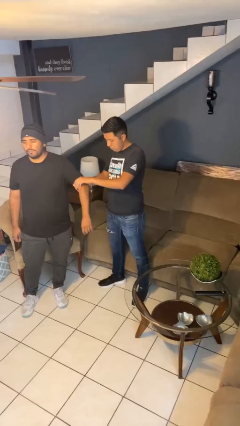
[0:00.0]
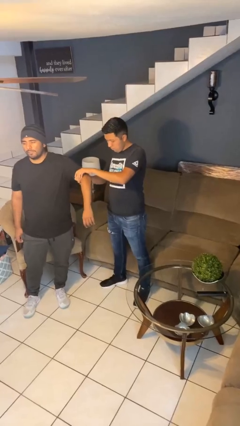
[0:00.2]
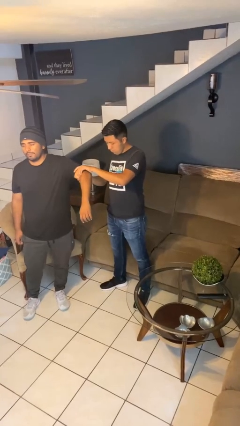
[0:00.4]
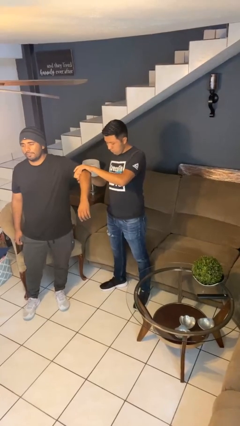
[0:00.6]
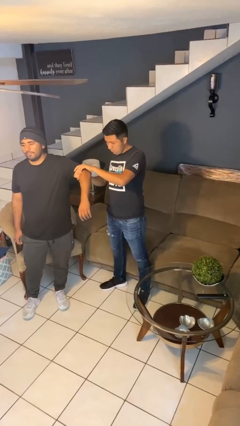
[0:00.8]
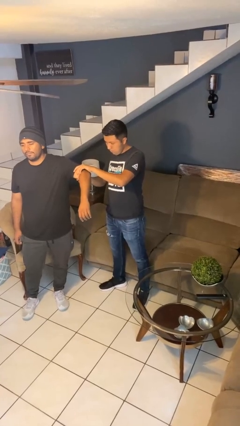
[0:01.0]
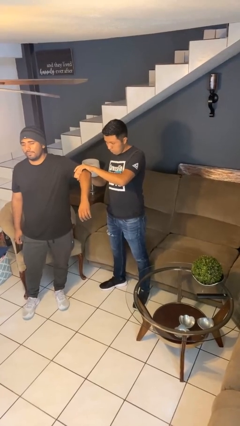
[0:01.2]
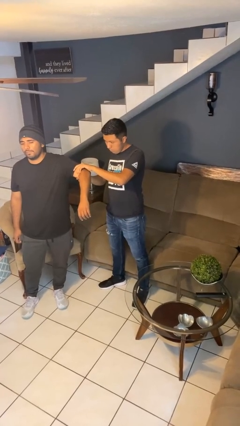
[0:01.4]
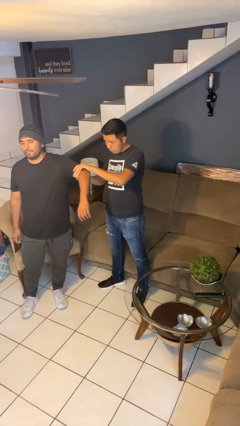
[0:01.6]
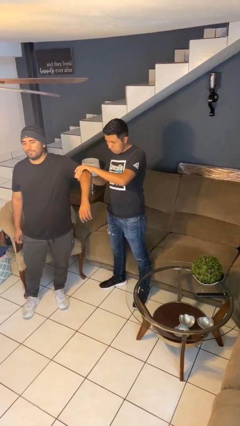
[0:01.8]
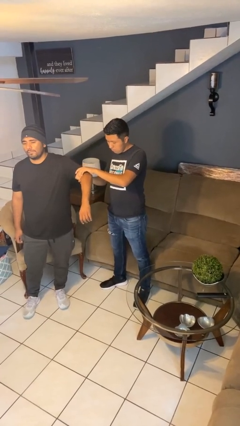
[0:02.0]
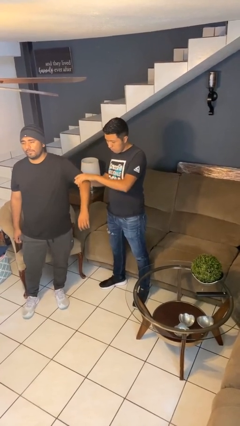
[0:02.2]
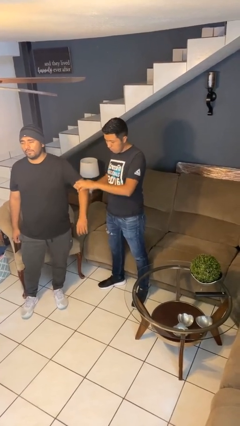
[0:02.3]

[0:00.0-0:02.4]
person grabs person by bicep

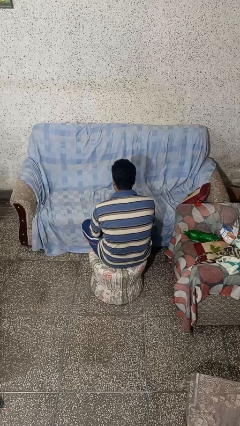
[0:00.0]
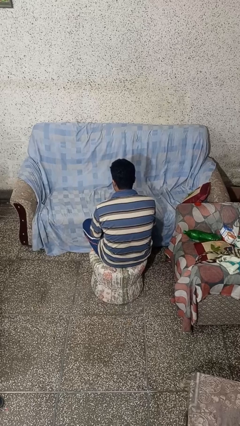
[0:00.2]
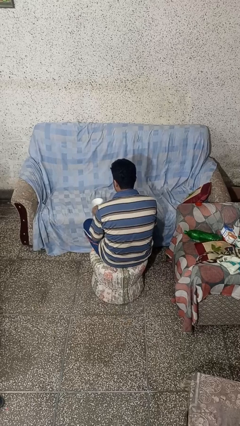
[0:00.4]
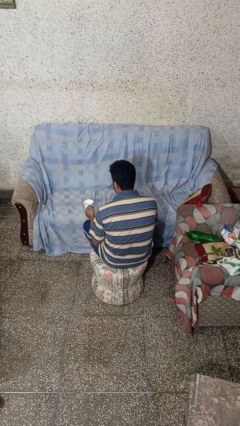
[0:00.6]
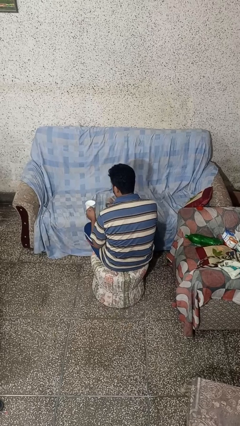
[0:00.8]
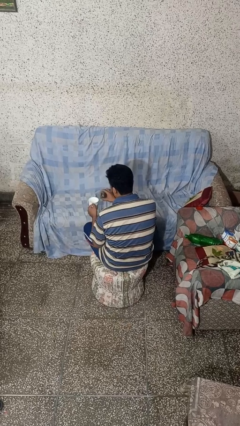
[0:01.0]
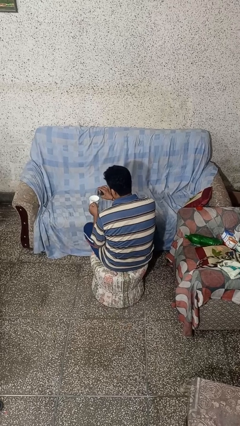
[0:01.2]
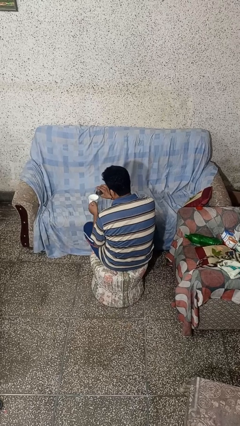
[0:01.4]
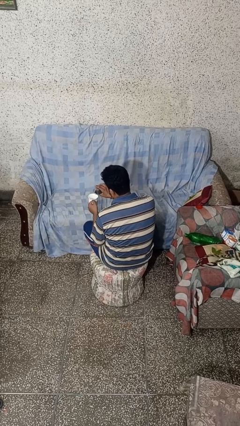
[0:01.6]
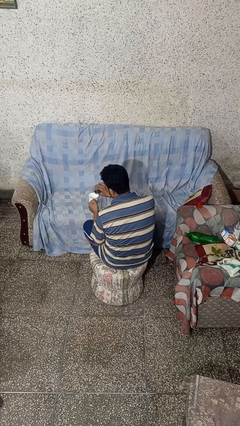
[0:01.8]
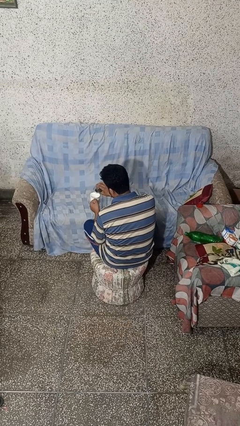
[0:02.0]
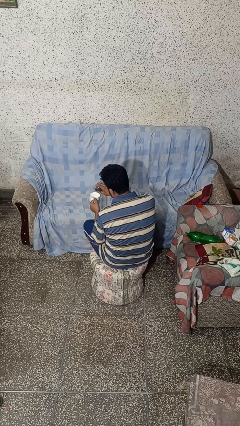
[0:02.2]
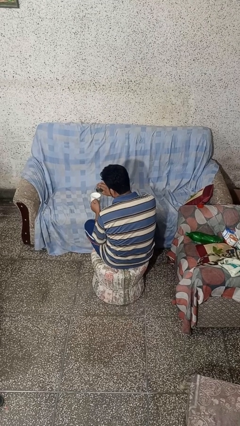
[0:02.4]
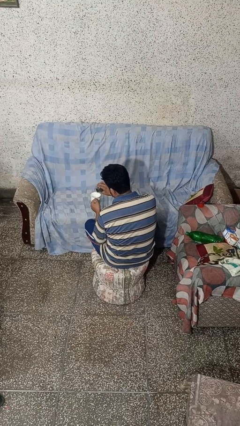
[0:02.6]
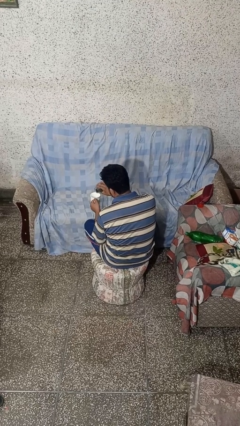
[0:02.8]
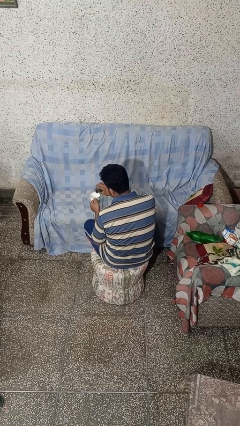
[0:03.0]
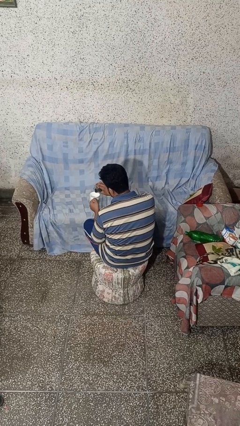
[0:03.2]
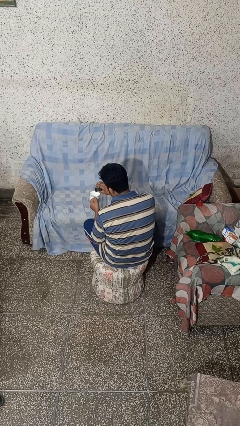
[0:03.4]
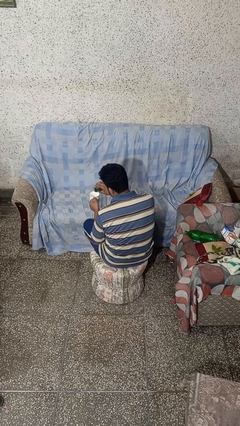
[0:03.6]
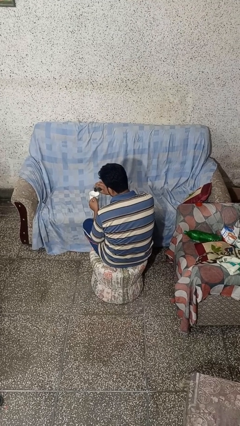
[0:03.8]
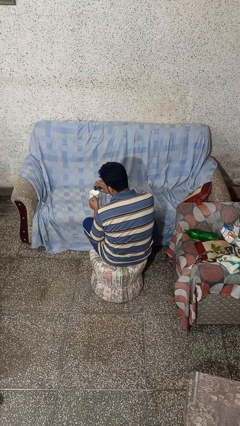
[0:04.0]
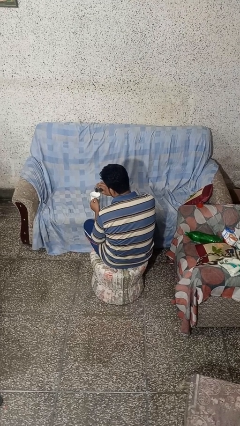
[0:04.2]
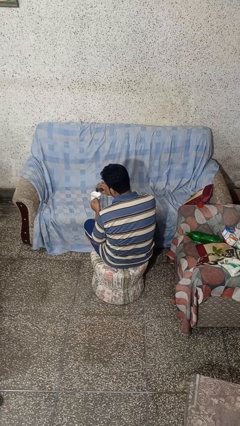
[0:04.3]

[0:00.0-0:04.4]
person pours coffee into mug

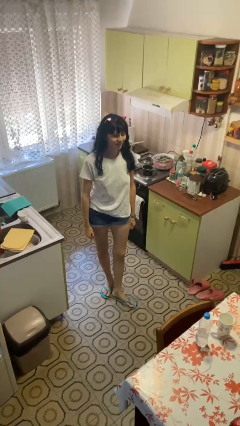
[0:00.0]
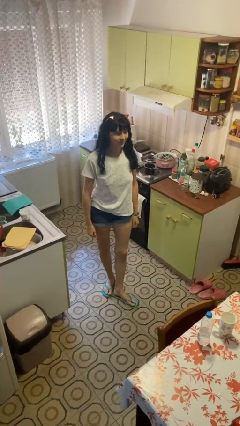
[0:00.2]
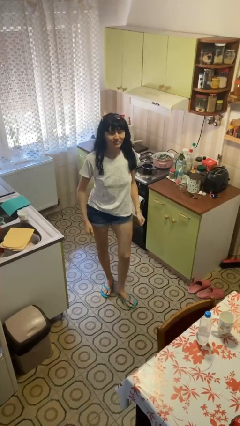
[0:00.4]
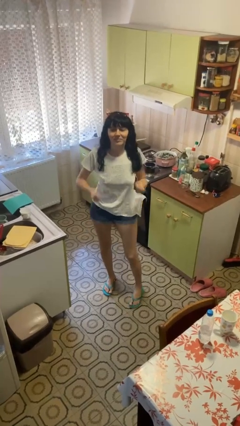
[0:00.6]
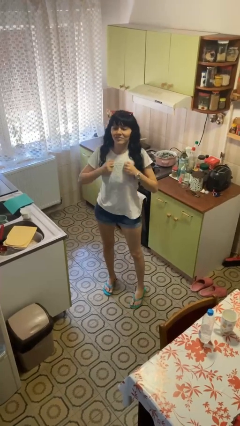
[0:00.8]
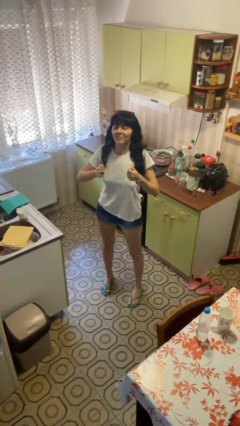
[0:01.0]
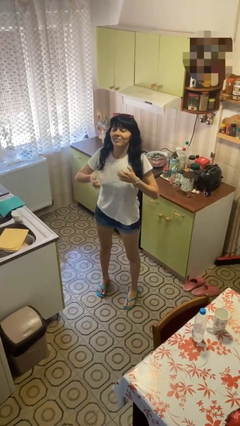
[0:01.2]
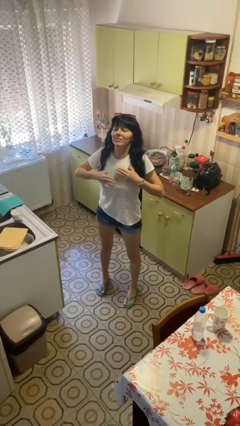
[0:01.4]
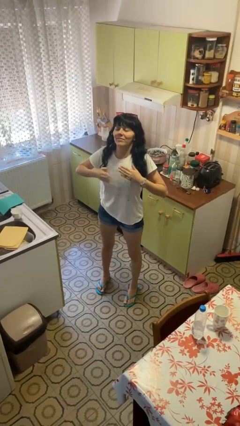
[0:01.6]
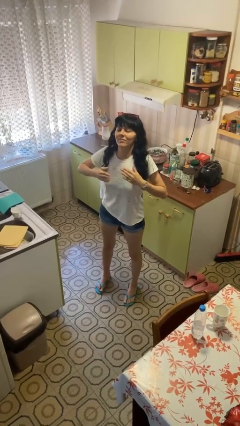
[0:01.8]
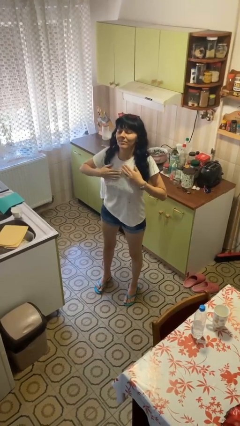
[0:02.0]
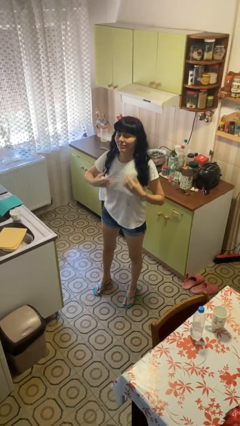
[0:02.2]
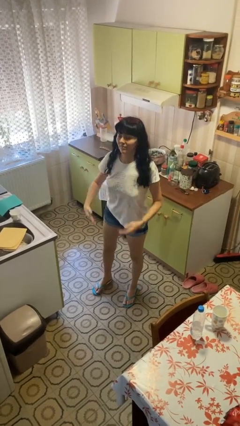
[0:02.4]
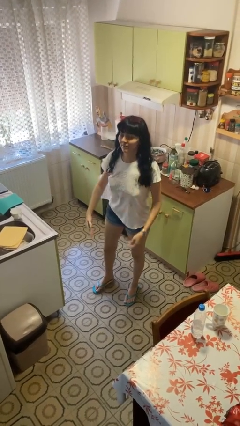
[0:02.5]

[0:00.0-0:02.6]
person drums on chest

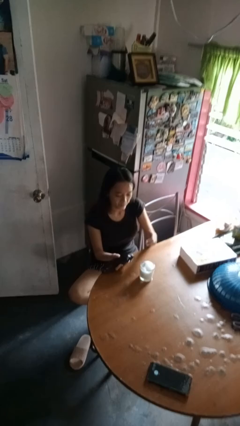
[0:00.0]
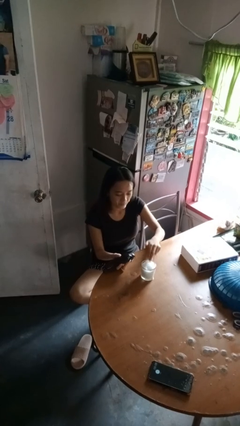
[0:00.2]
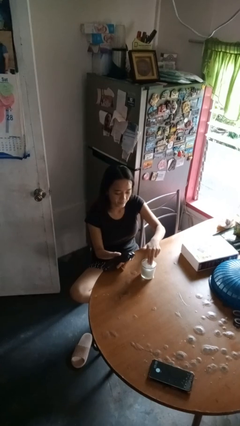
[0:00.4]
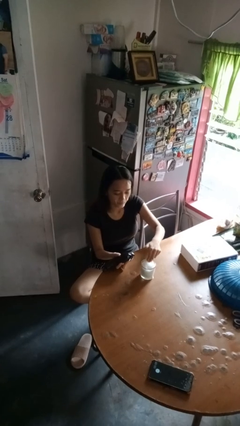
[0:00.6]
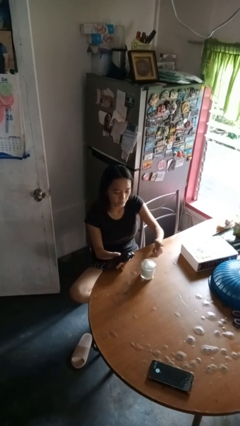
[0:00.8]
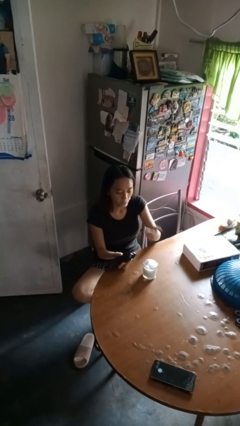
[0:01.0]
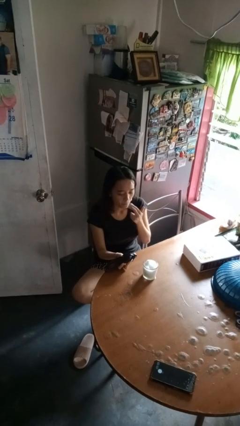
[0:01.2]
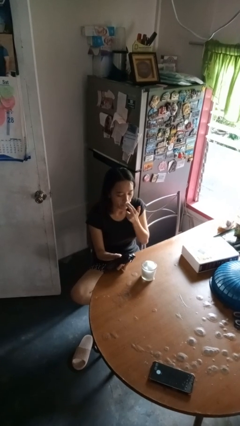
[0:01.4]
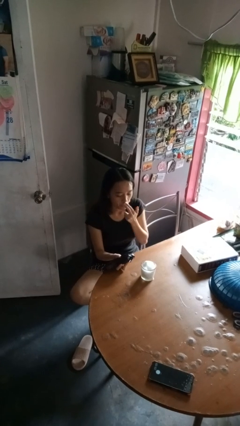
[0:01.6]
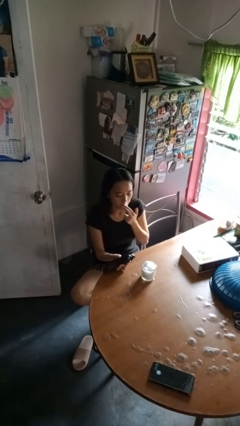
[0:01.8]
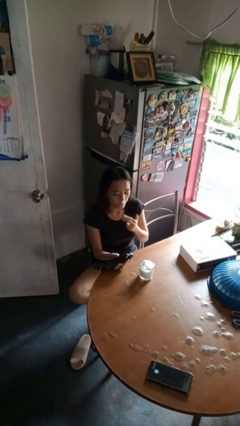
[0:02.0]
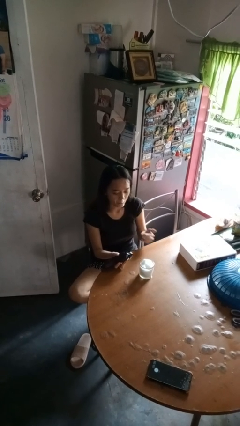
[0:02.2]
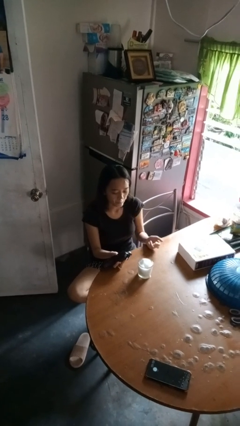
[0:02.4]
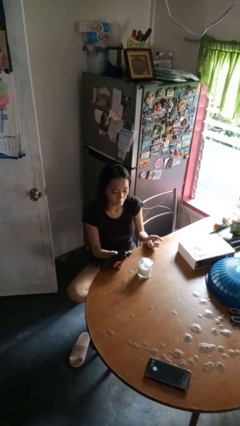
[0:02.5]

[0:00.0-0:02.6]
person applies shaving cream

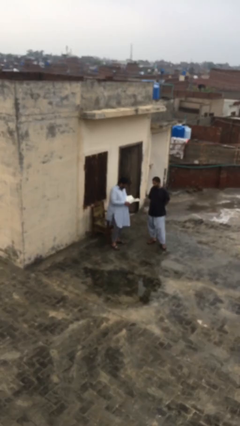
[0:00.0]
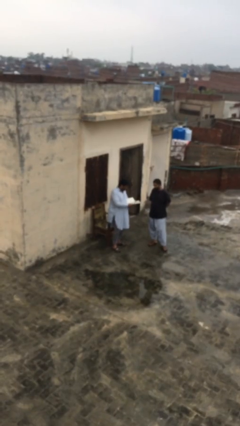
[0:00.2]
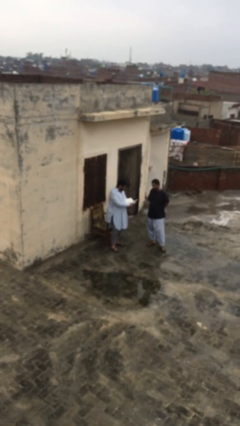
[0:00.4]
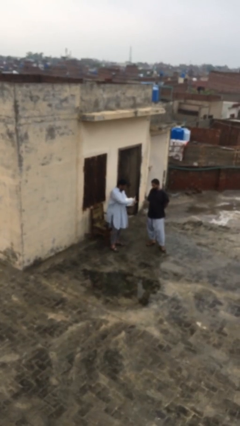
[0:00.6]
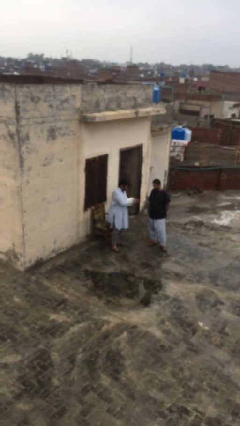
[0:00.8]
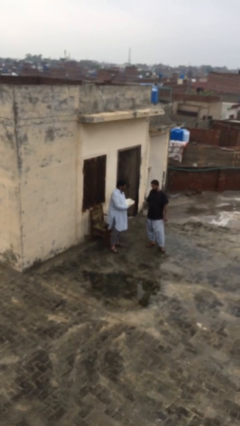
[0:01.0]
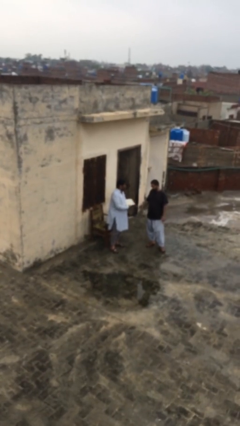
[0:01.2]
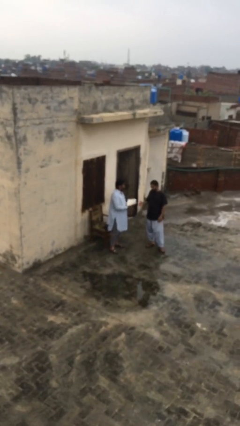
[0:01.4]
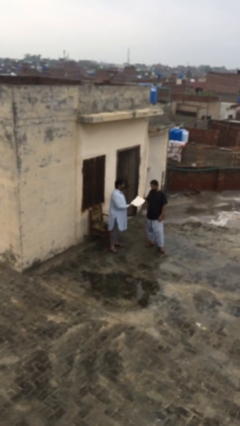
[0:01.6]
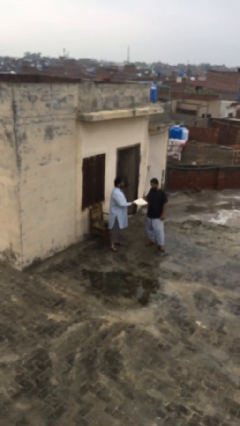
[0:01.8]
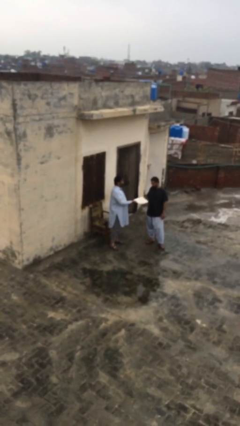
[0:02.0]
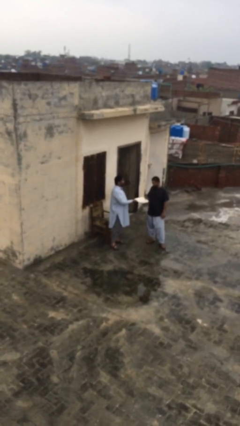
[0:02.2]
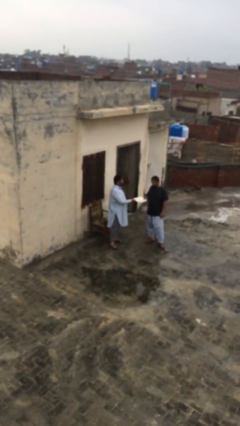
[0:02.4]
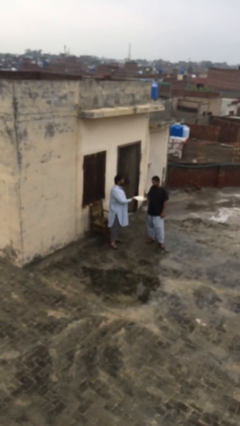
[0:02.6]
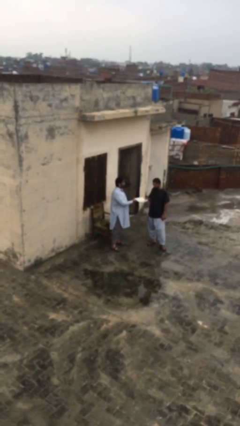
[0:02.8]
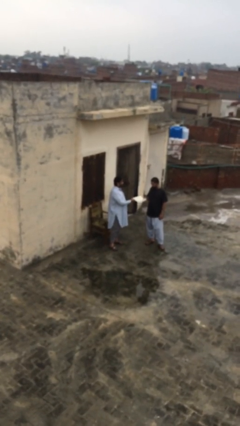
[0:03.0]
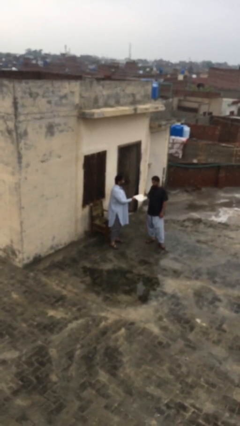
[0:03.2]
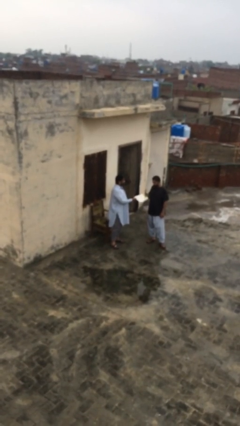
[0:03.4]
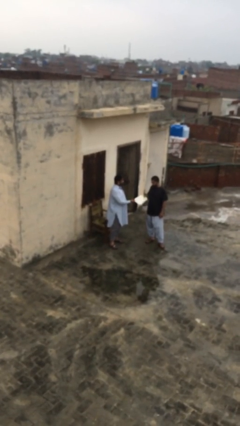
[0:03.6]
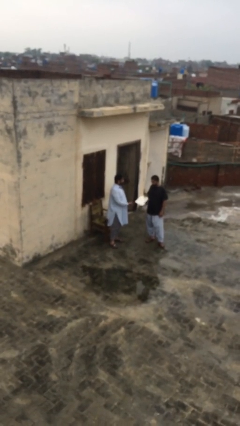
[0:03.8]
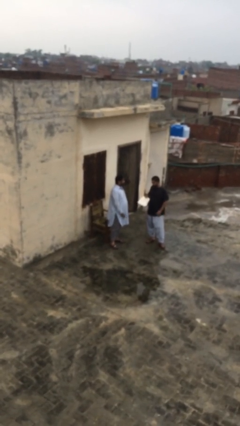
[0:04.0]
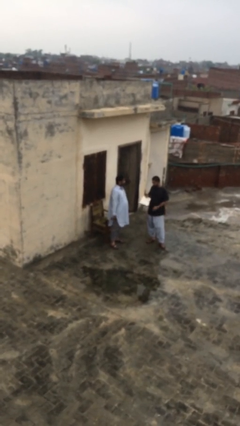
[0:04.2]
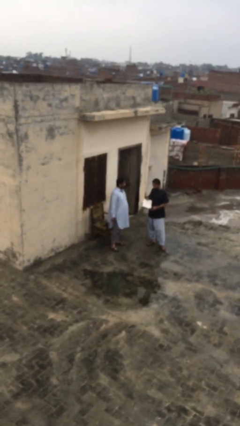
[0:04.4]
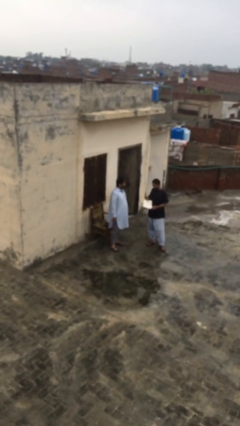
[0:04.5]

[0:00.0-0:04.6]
person transfers object to person

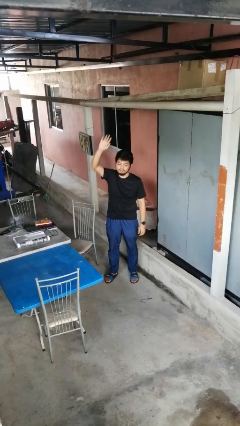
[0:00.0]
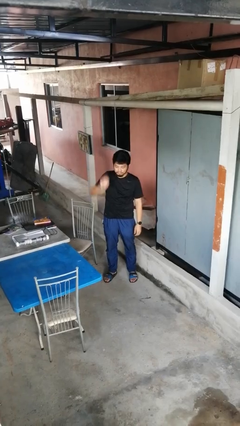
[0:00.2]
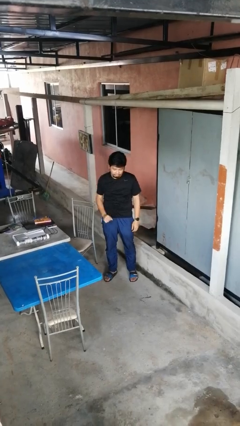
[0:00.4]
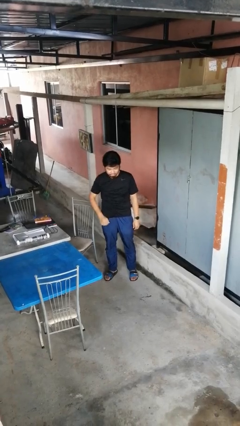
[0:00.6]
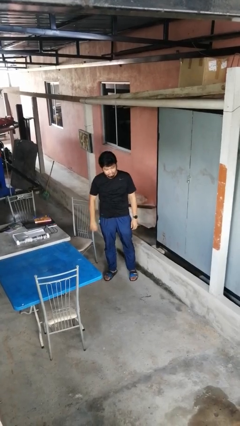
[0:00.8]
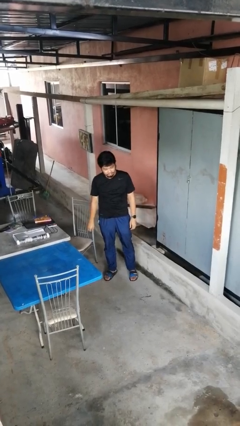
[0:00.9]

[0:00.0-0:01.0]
person gestures lower hand
